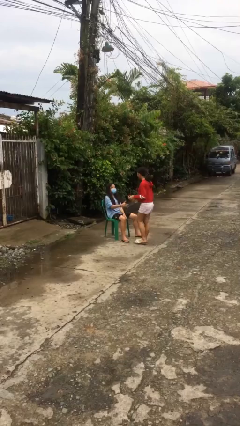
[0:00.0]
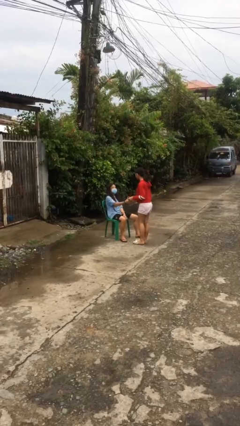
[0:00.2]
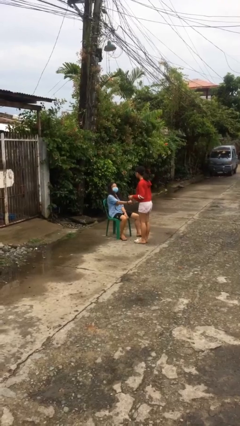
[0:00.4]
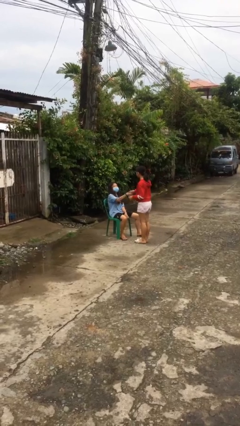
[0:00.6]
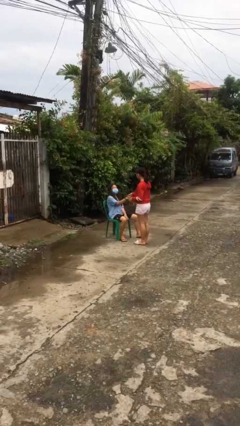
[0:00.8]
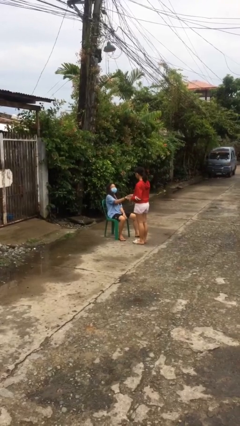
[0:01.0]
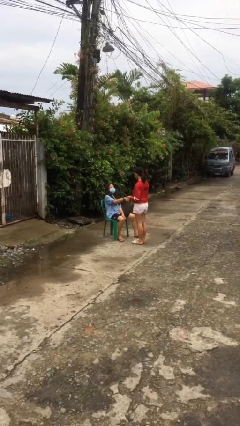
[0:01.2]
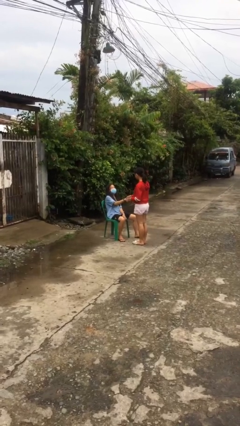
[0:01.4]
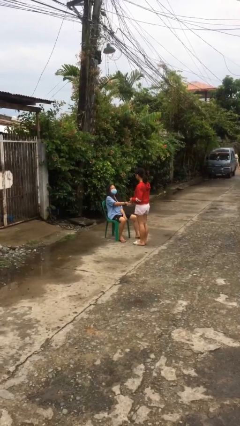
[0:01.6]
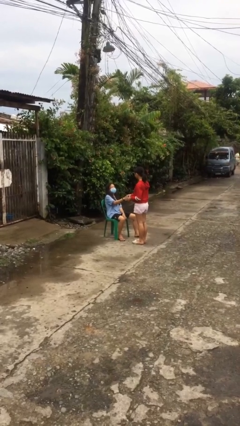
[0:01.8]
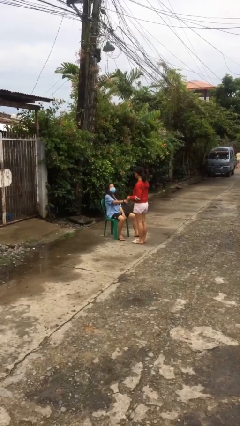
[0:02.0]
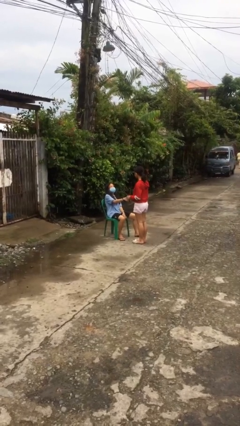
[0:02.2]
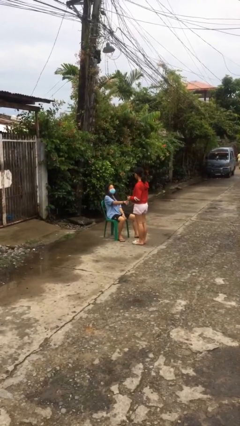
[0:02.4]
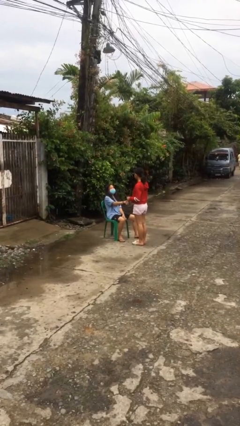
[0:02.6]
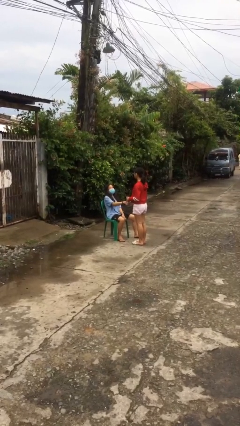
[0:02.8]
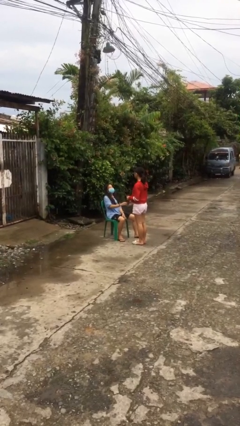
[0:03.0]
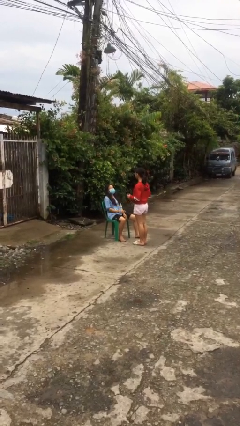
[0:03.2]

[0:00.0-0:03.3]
person shakes hand

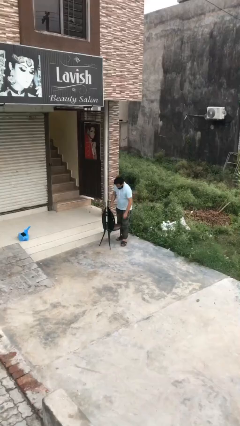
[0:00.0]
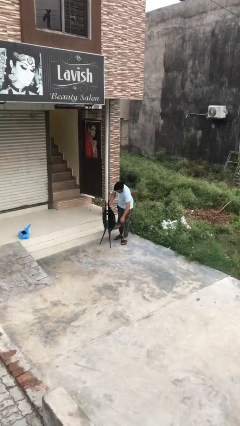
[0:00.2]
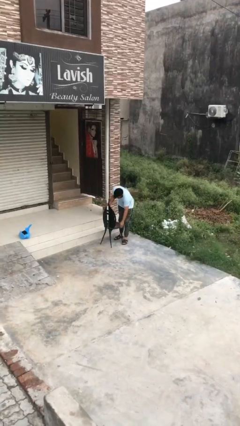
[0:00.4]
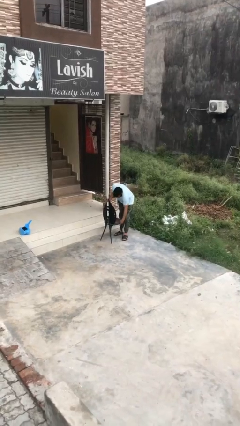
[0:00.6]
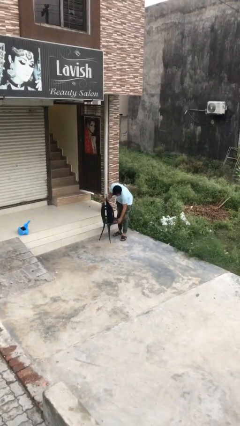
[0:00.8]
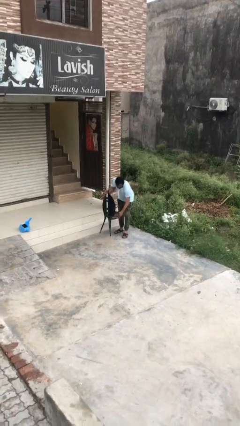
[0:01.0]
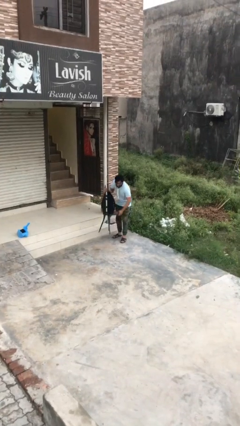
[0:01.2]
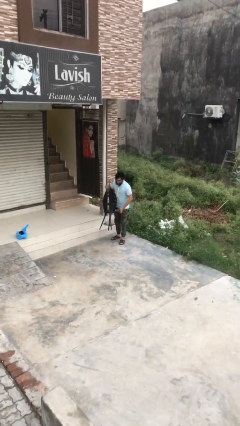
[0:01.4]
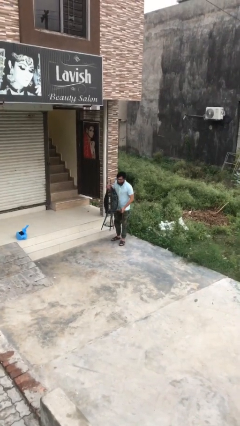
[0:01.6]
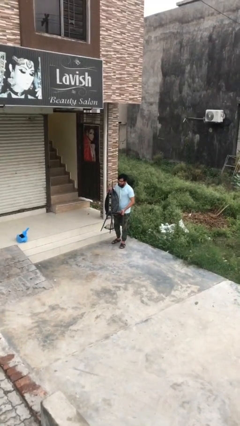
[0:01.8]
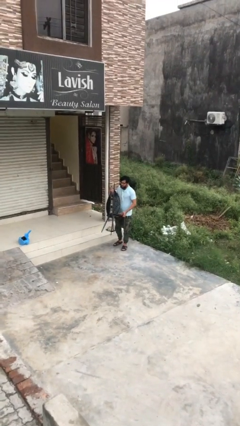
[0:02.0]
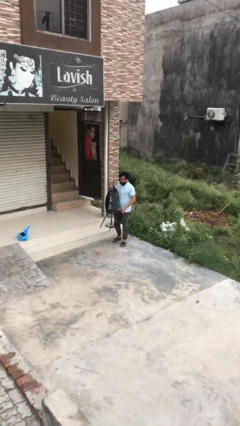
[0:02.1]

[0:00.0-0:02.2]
person picks up object from floor

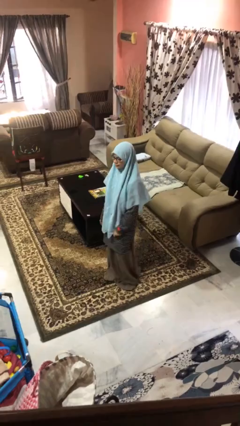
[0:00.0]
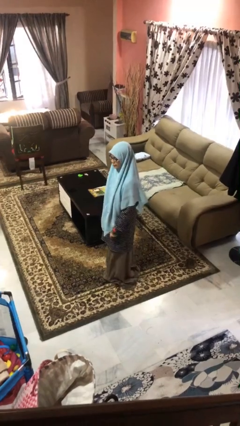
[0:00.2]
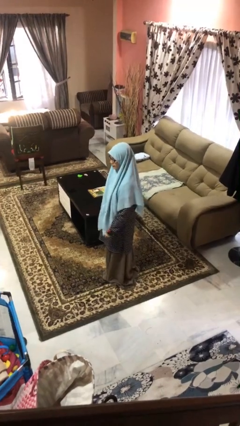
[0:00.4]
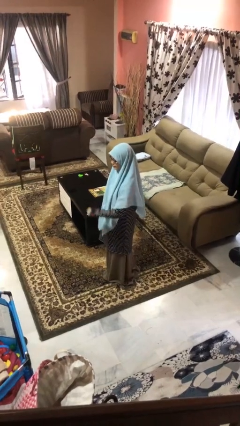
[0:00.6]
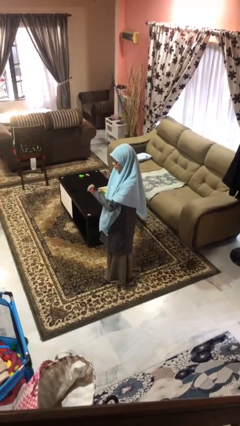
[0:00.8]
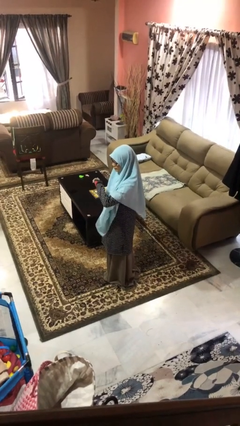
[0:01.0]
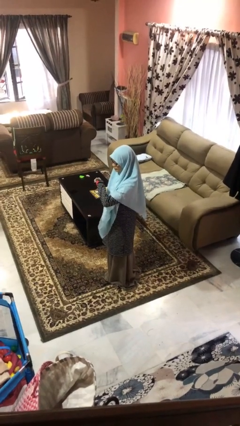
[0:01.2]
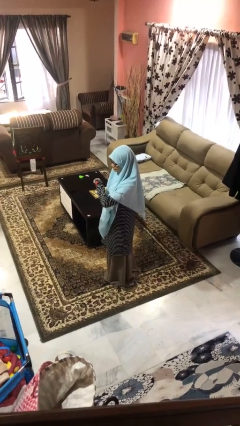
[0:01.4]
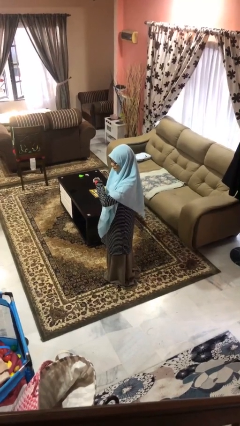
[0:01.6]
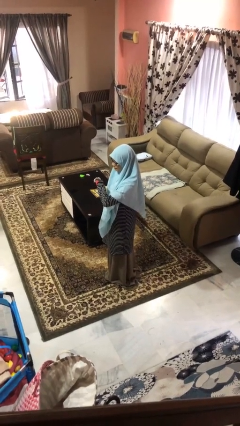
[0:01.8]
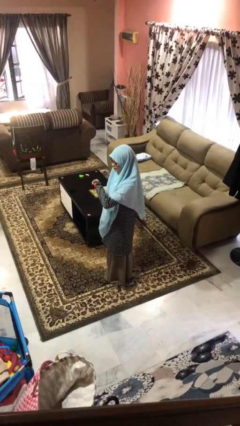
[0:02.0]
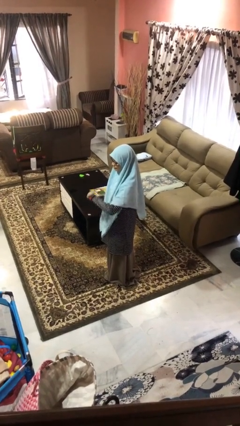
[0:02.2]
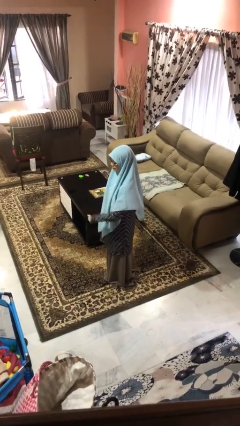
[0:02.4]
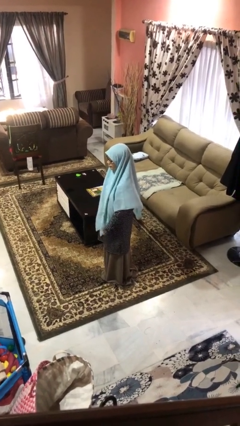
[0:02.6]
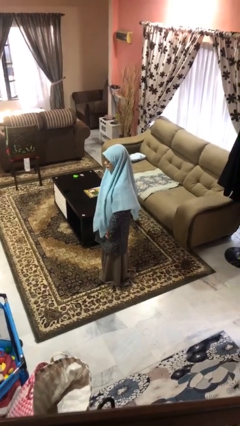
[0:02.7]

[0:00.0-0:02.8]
person looks at wristwatch

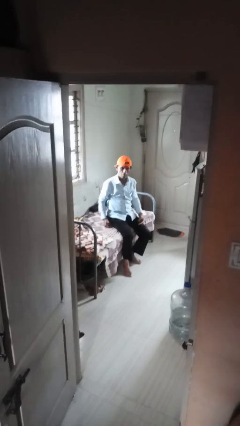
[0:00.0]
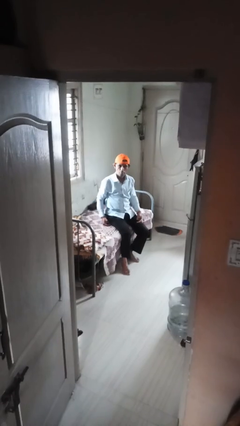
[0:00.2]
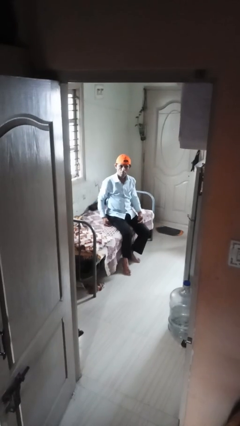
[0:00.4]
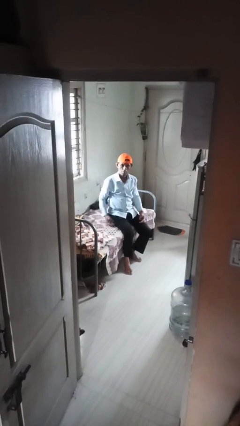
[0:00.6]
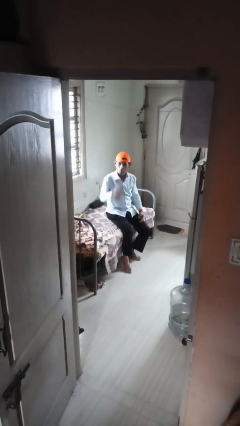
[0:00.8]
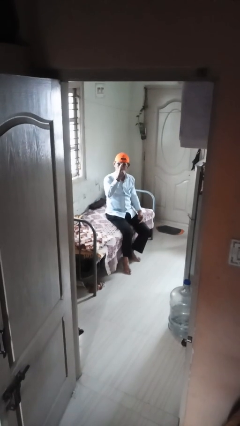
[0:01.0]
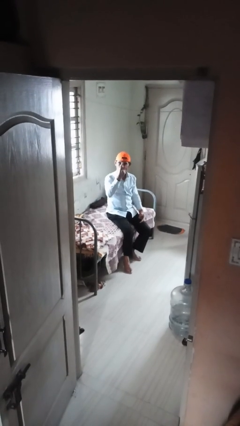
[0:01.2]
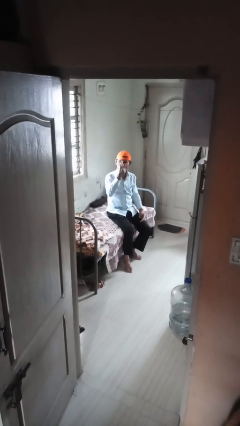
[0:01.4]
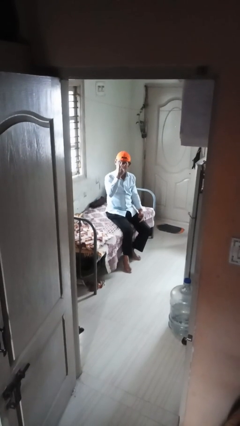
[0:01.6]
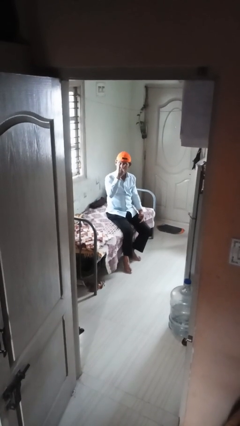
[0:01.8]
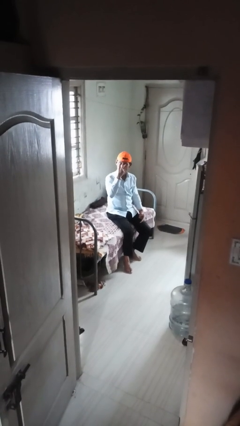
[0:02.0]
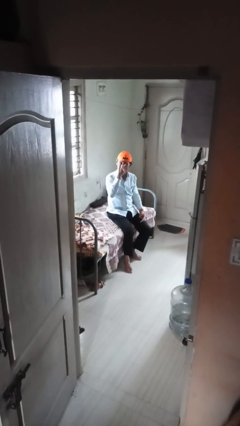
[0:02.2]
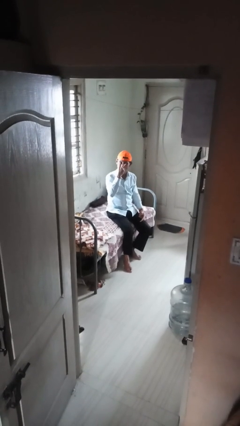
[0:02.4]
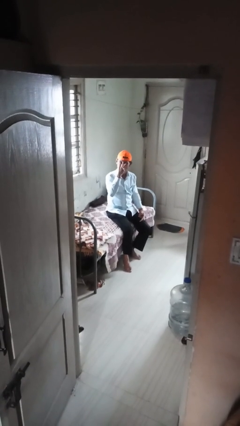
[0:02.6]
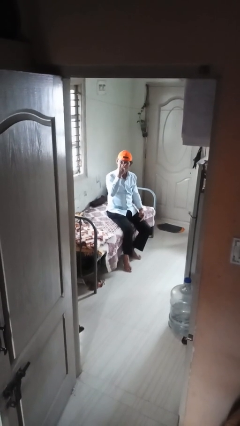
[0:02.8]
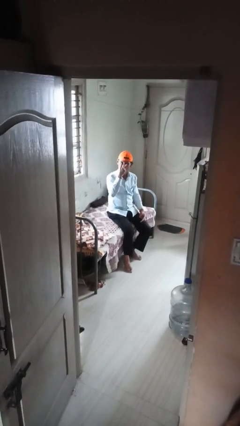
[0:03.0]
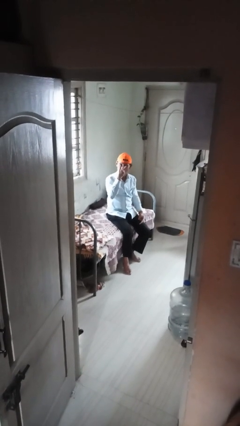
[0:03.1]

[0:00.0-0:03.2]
person gestures watch closely

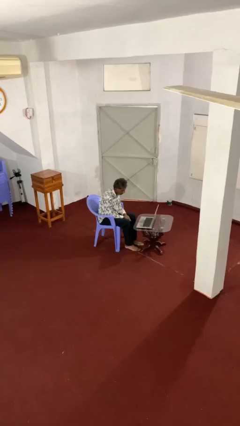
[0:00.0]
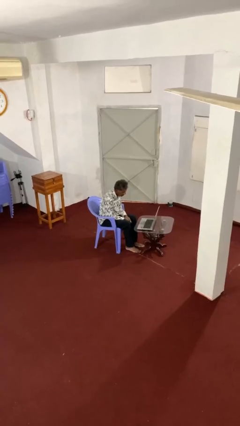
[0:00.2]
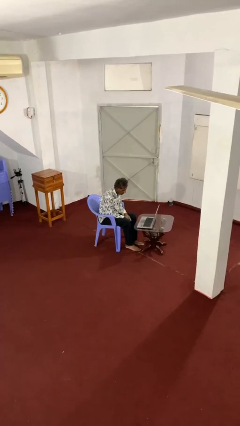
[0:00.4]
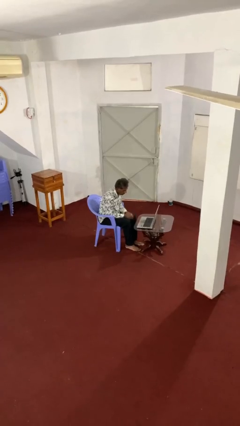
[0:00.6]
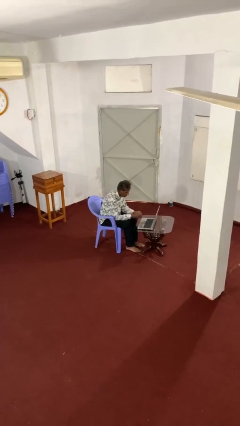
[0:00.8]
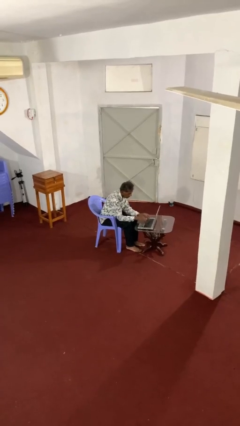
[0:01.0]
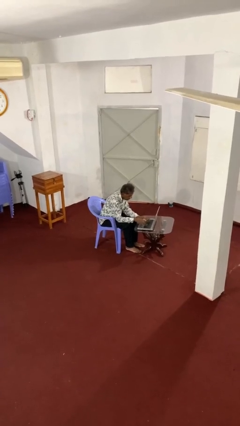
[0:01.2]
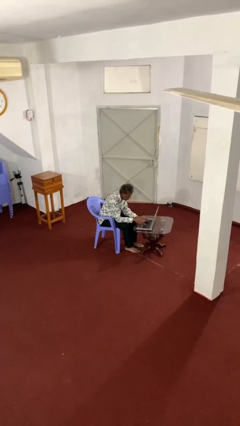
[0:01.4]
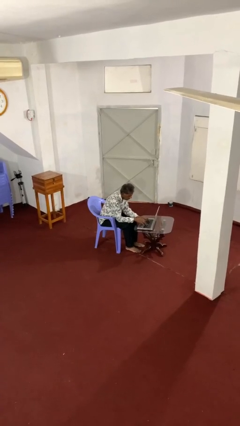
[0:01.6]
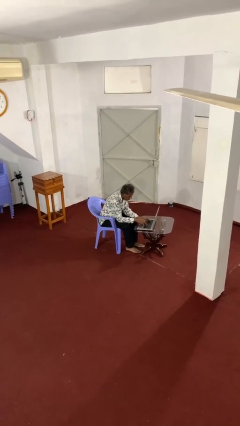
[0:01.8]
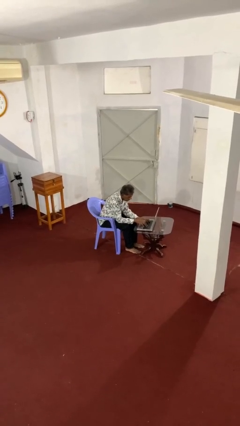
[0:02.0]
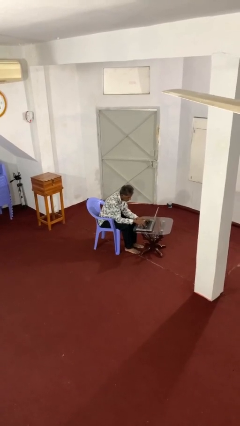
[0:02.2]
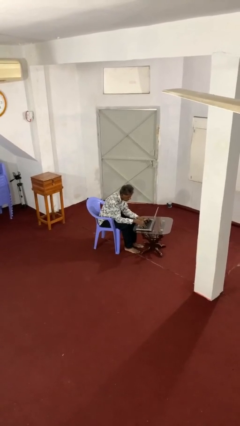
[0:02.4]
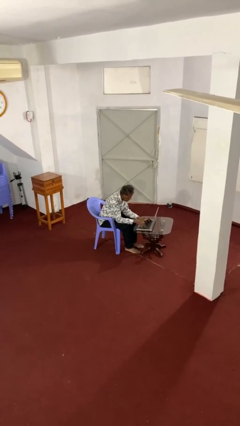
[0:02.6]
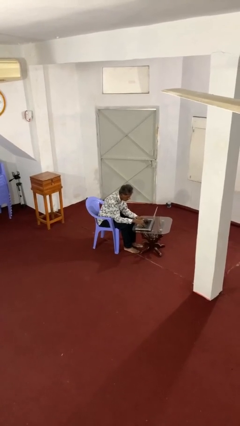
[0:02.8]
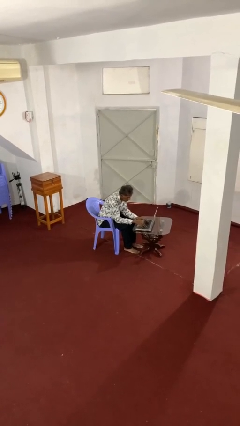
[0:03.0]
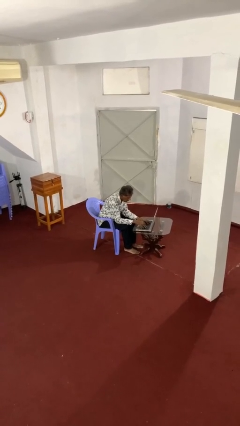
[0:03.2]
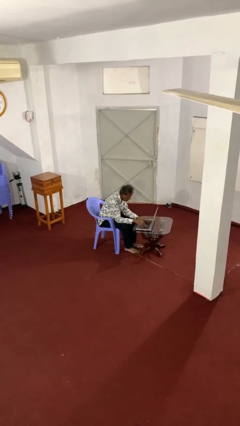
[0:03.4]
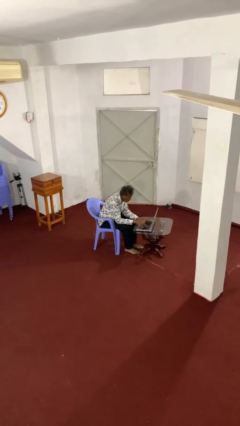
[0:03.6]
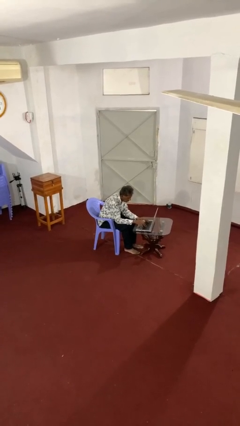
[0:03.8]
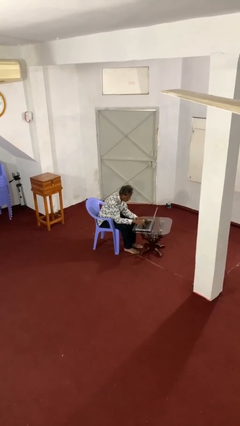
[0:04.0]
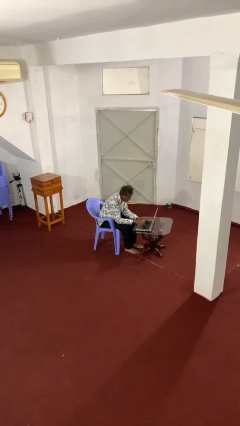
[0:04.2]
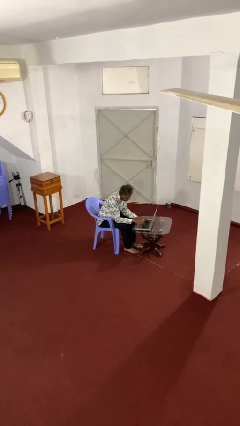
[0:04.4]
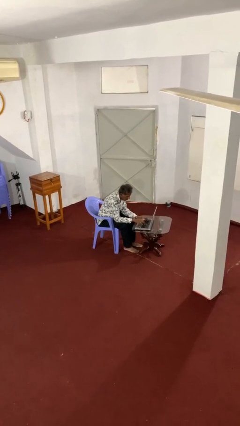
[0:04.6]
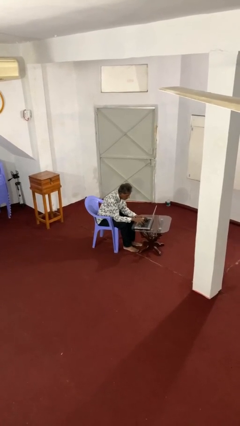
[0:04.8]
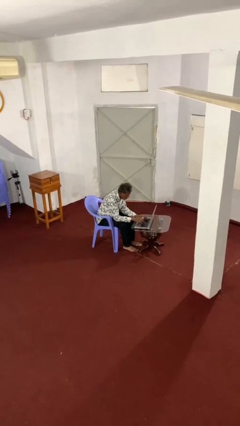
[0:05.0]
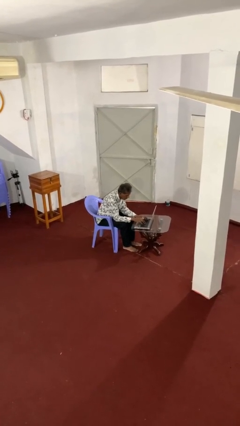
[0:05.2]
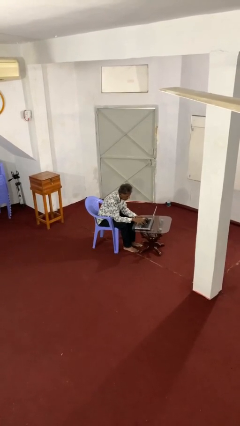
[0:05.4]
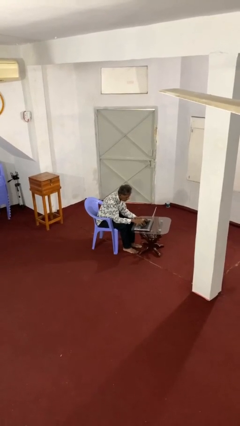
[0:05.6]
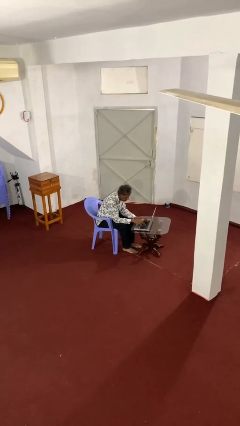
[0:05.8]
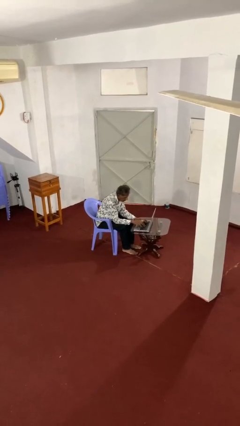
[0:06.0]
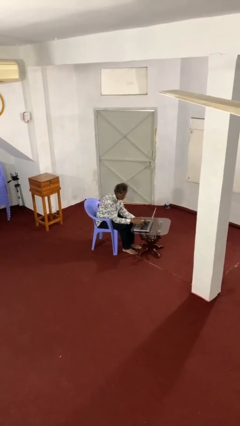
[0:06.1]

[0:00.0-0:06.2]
person interacts with laptop
